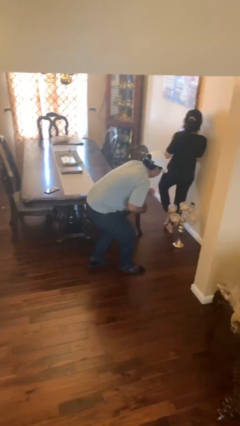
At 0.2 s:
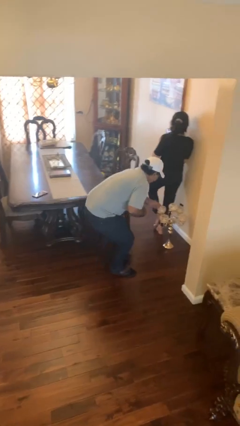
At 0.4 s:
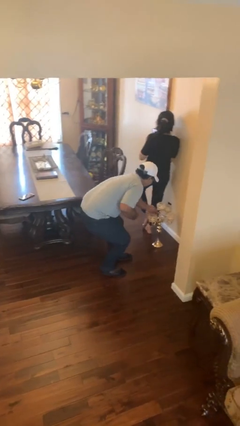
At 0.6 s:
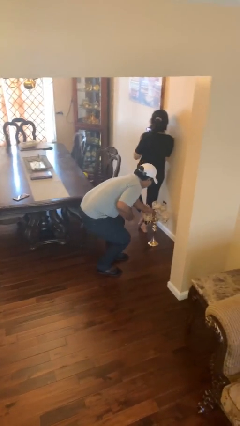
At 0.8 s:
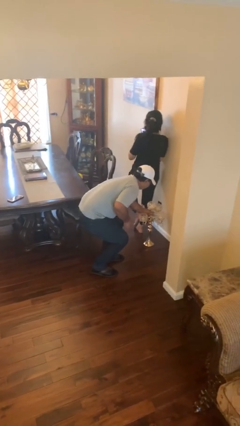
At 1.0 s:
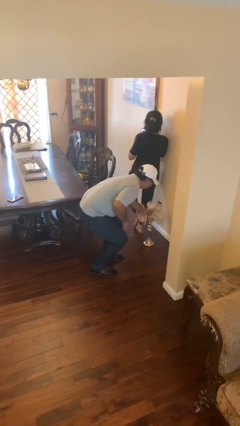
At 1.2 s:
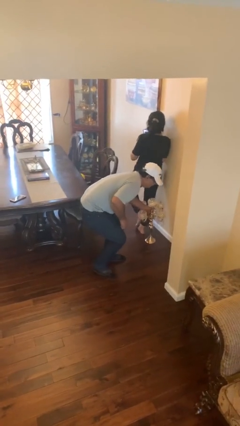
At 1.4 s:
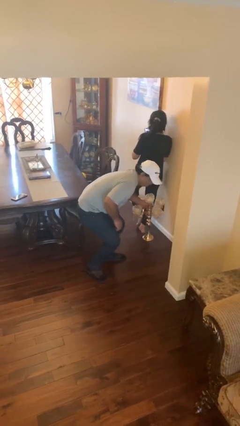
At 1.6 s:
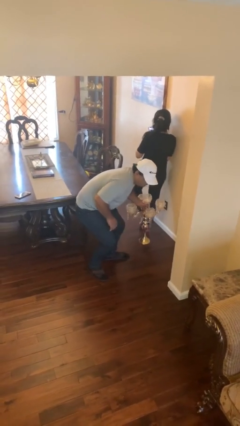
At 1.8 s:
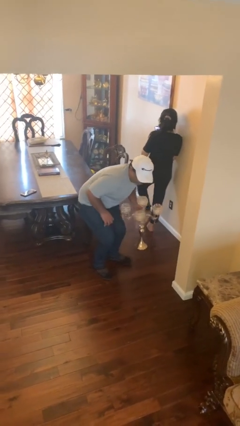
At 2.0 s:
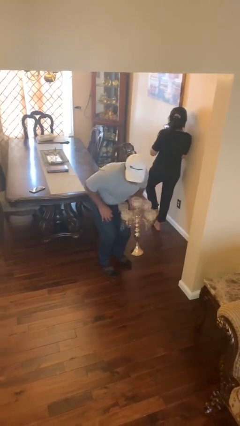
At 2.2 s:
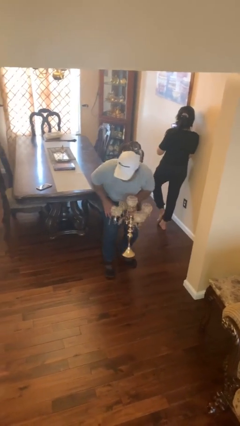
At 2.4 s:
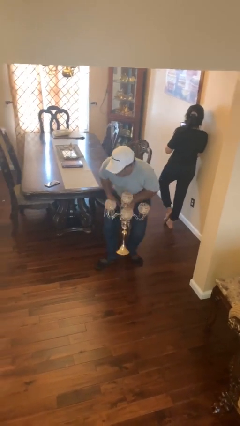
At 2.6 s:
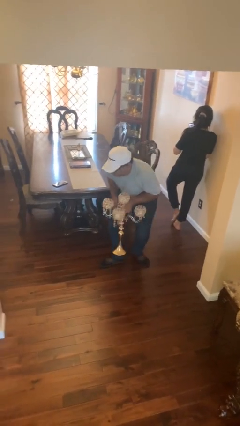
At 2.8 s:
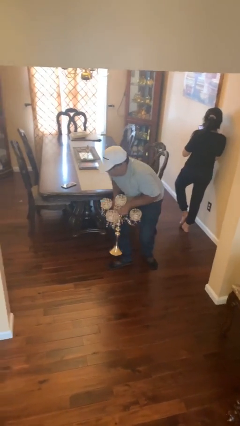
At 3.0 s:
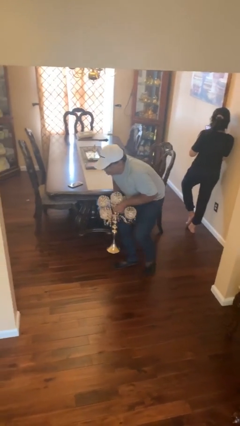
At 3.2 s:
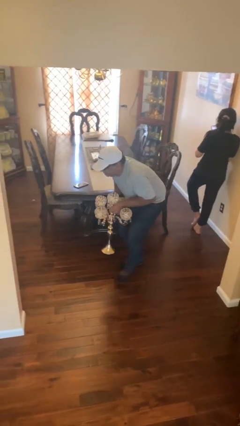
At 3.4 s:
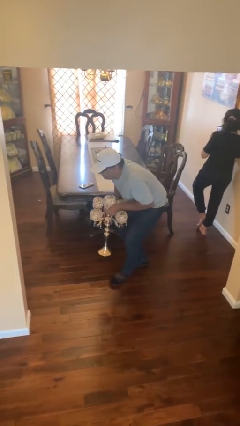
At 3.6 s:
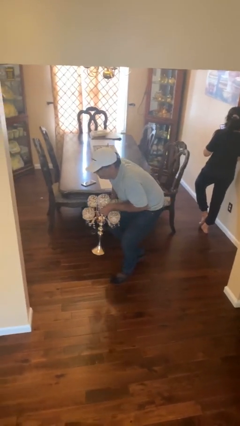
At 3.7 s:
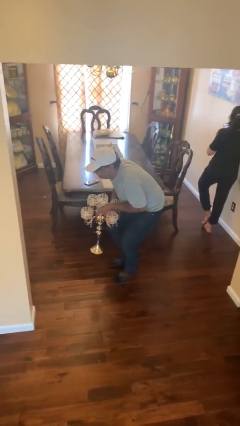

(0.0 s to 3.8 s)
person steals object from person

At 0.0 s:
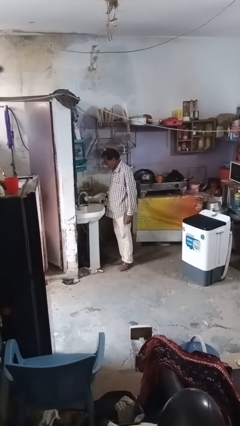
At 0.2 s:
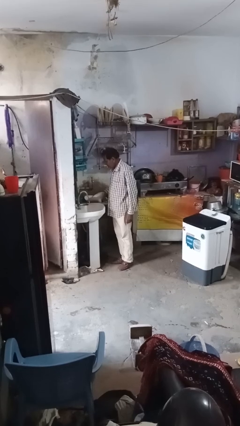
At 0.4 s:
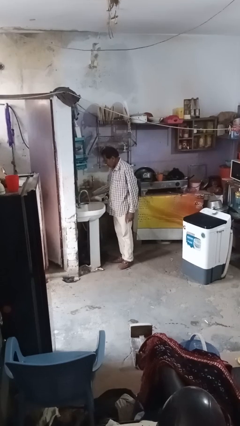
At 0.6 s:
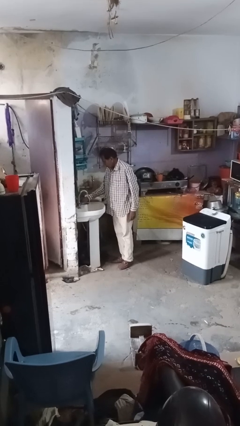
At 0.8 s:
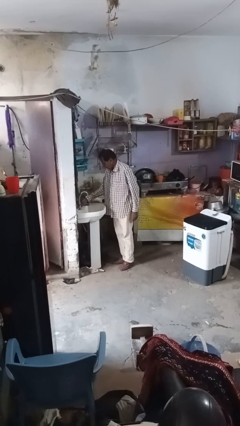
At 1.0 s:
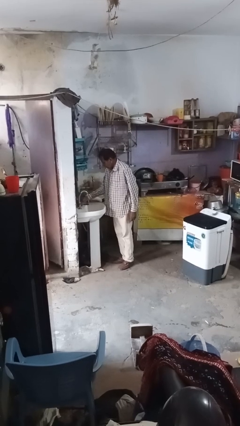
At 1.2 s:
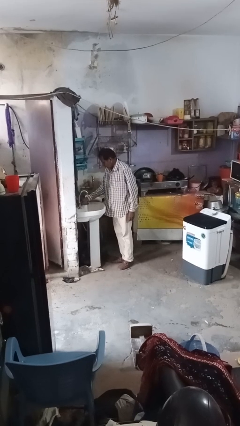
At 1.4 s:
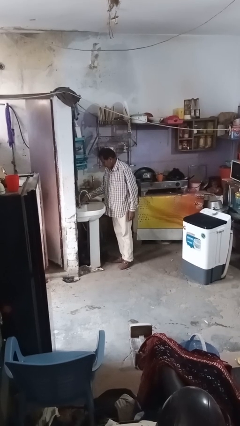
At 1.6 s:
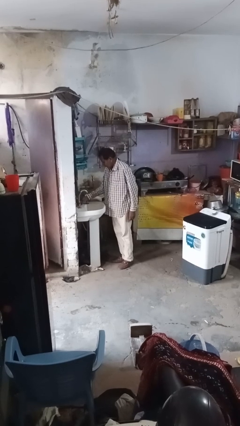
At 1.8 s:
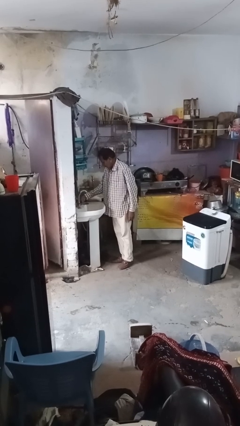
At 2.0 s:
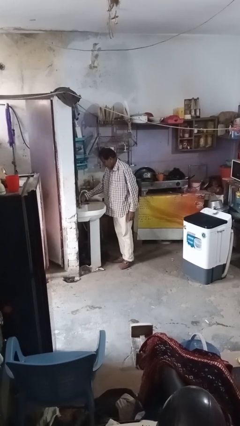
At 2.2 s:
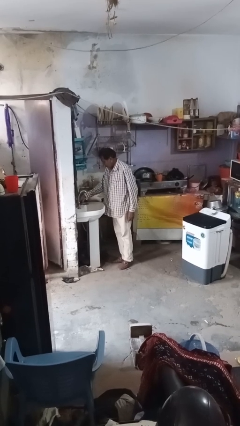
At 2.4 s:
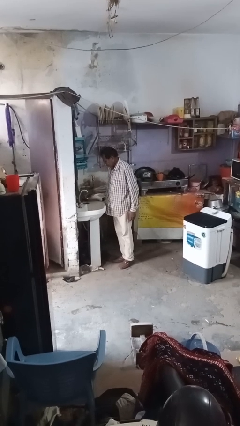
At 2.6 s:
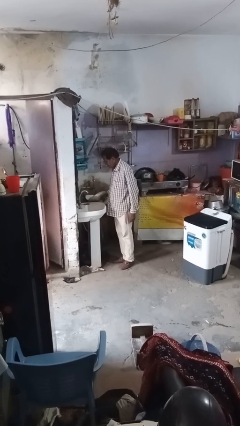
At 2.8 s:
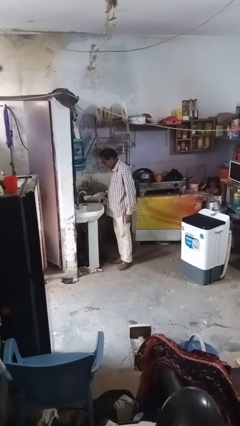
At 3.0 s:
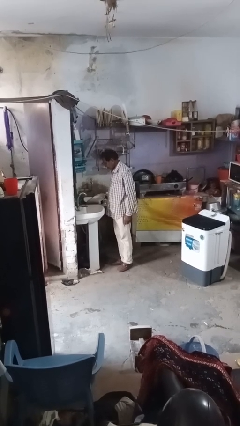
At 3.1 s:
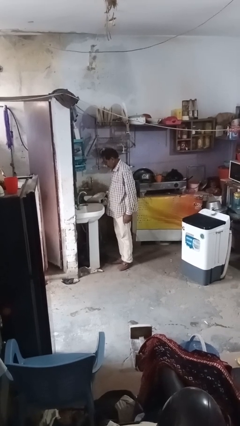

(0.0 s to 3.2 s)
person turns off faucet

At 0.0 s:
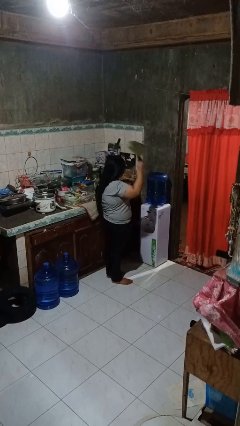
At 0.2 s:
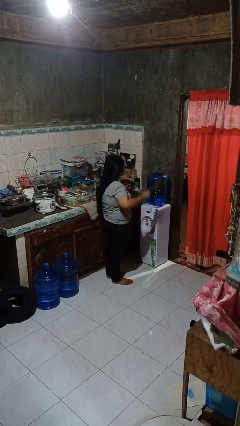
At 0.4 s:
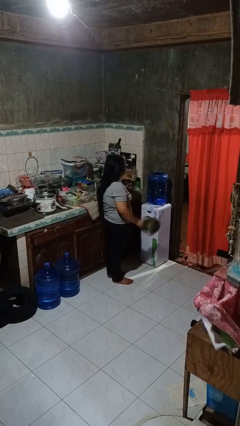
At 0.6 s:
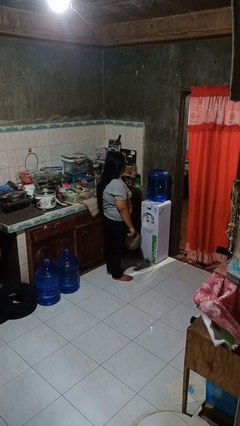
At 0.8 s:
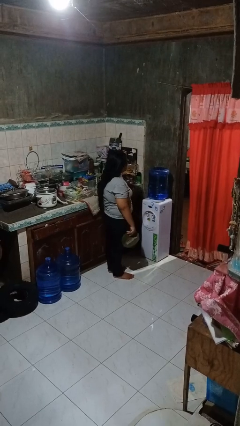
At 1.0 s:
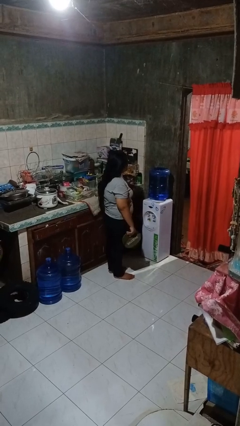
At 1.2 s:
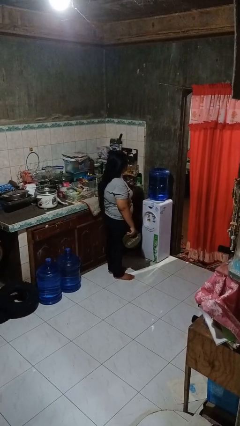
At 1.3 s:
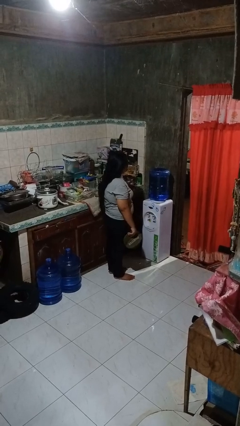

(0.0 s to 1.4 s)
person takes off hat

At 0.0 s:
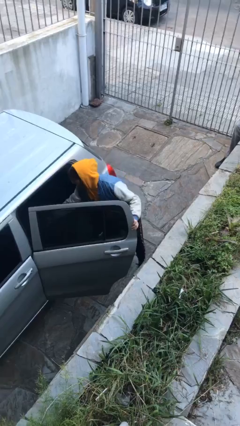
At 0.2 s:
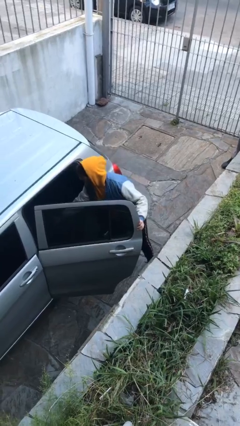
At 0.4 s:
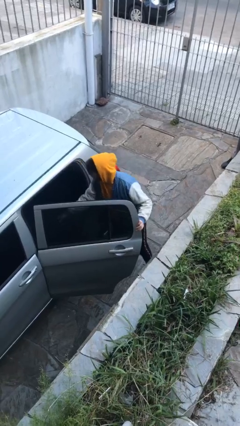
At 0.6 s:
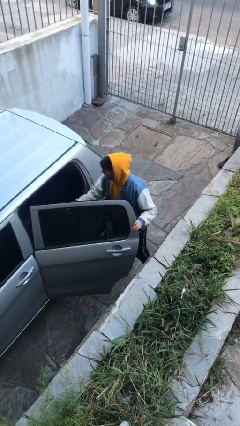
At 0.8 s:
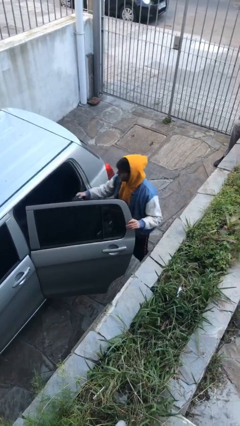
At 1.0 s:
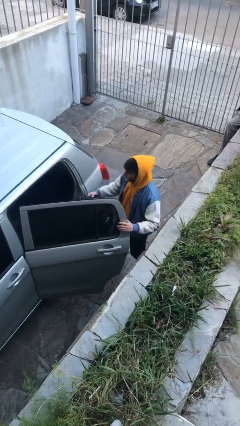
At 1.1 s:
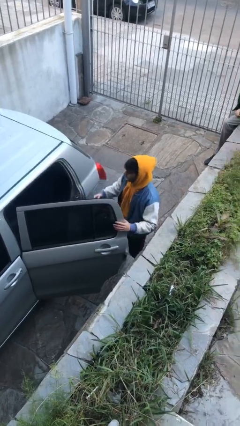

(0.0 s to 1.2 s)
person unloads car

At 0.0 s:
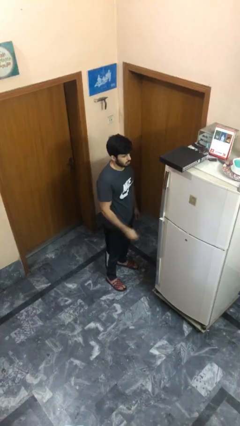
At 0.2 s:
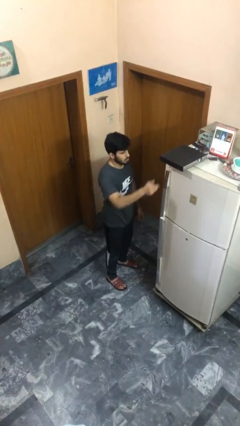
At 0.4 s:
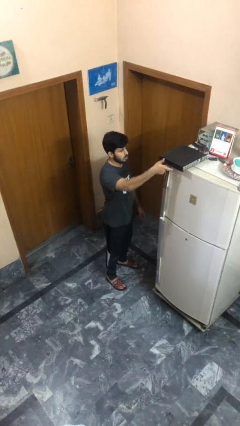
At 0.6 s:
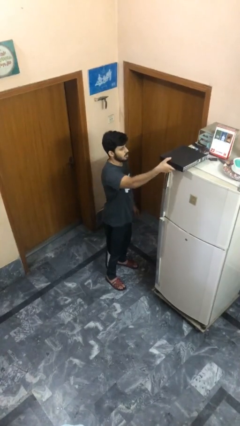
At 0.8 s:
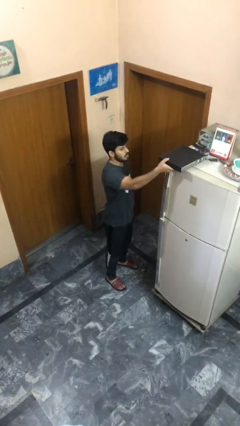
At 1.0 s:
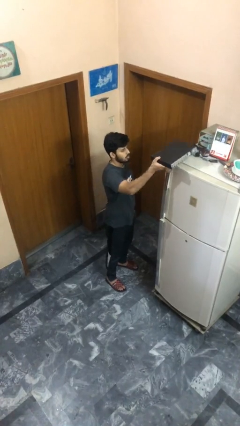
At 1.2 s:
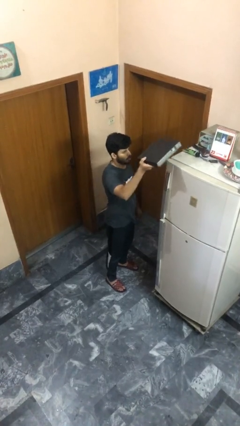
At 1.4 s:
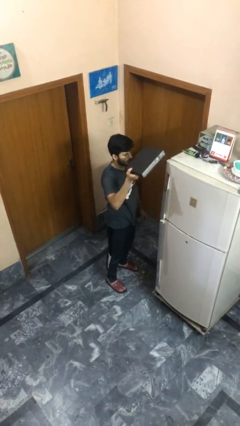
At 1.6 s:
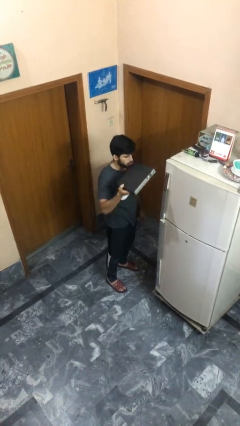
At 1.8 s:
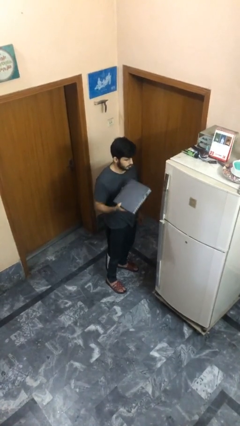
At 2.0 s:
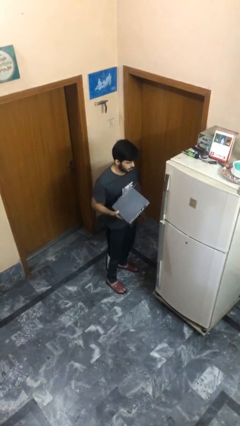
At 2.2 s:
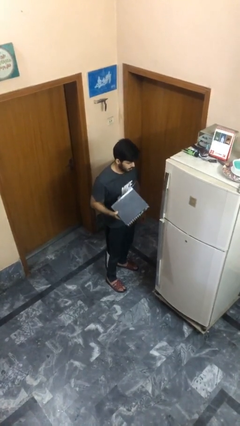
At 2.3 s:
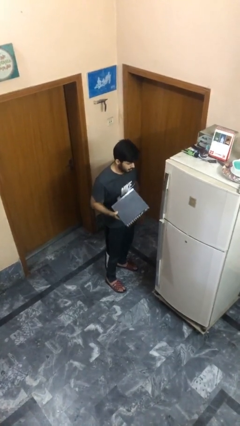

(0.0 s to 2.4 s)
person picks up object from countertop

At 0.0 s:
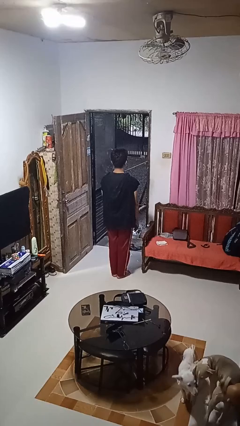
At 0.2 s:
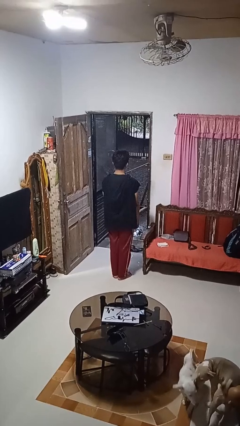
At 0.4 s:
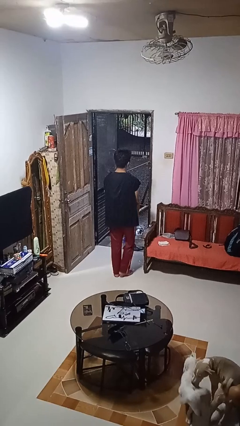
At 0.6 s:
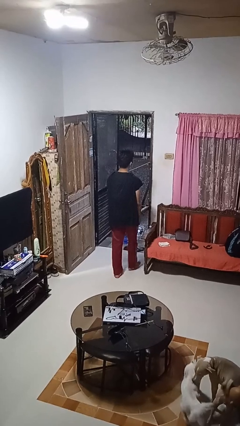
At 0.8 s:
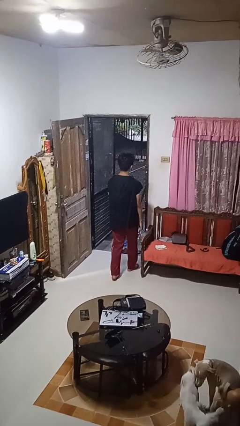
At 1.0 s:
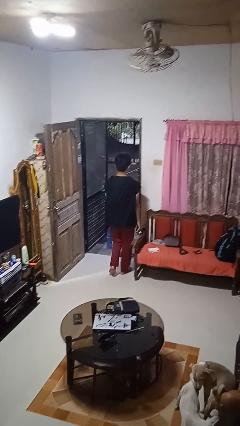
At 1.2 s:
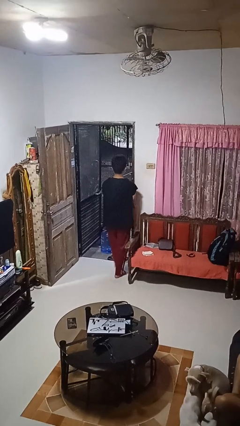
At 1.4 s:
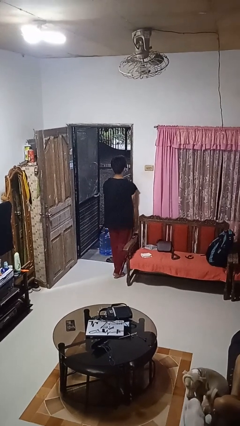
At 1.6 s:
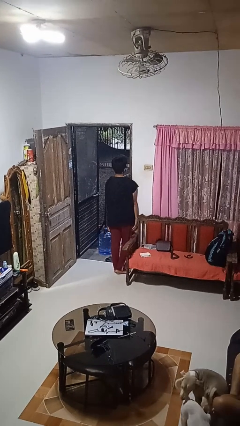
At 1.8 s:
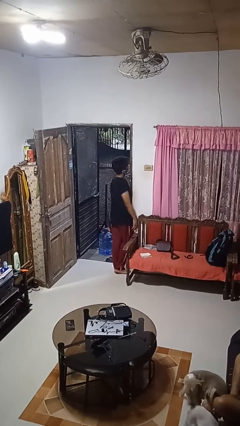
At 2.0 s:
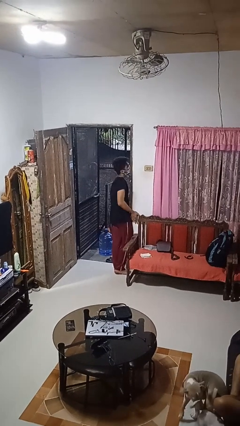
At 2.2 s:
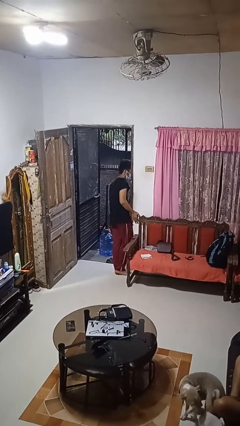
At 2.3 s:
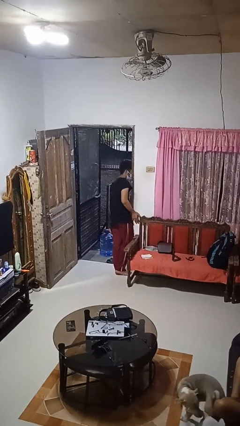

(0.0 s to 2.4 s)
person bumps into wall

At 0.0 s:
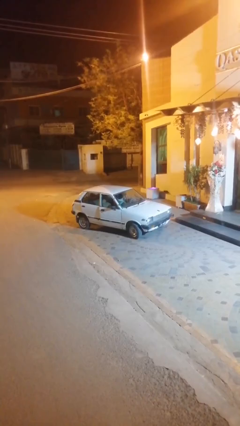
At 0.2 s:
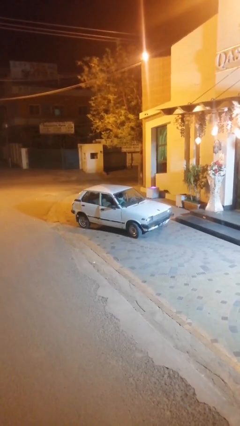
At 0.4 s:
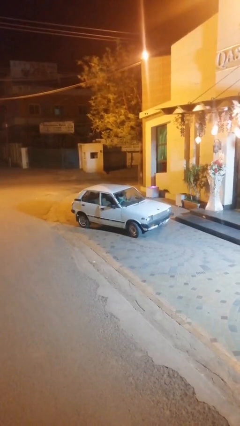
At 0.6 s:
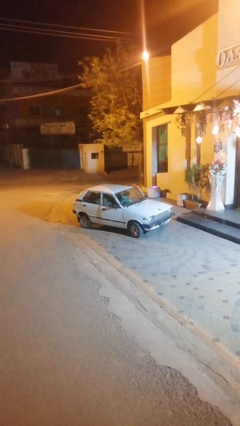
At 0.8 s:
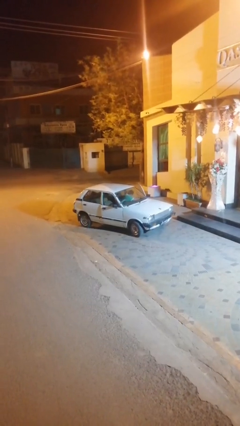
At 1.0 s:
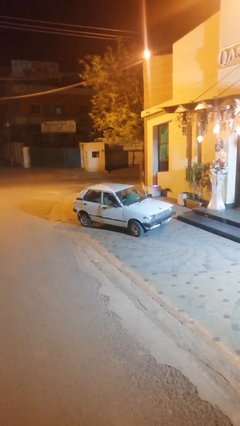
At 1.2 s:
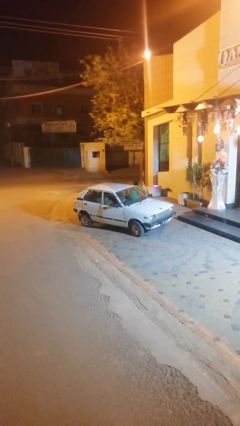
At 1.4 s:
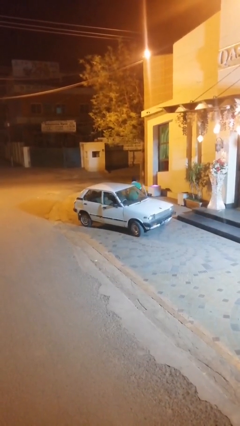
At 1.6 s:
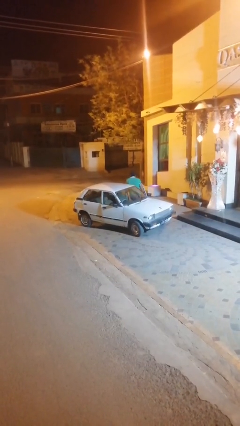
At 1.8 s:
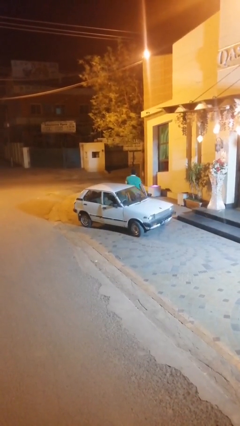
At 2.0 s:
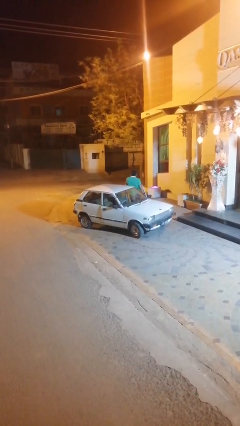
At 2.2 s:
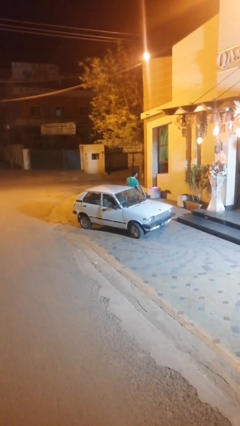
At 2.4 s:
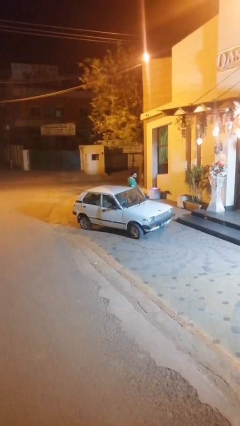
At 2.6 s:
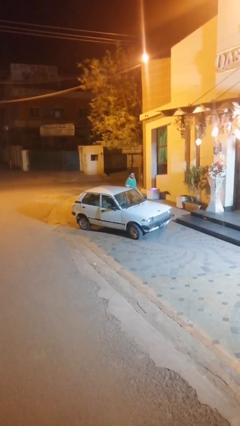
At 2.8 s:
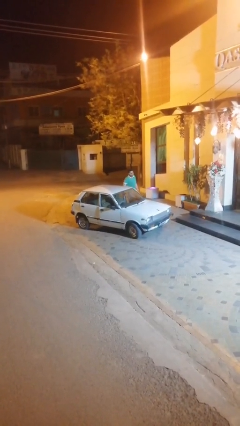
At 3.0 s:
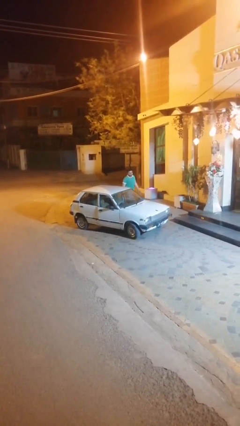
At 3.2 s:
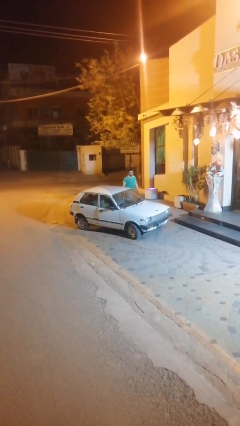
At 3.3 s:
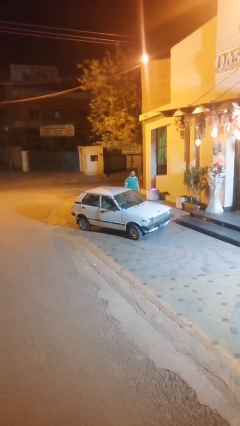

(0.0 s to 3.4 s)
car drops off person
